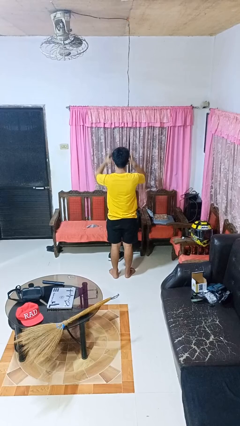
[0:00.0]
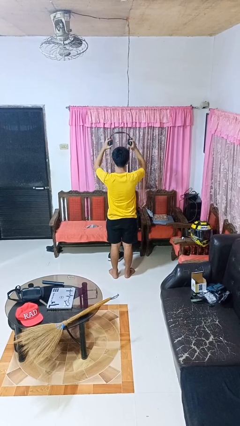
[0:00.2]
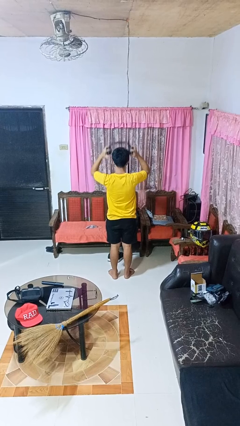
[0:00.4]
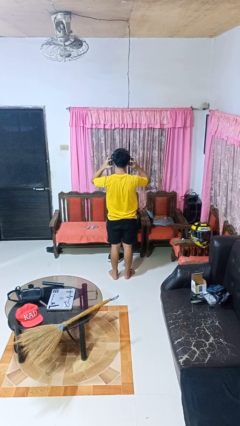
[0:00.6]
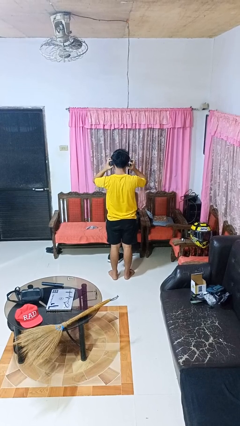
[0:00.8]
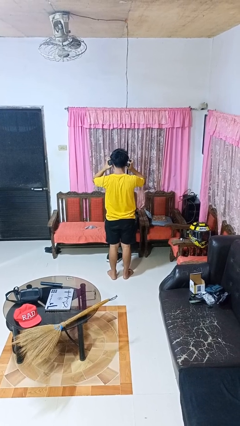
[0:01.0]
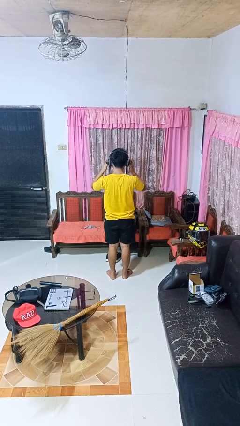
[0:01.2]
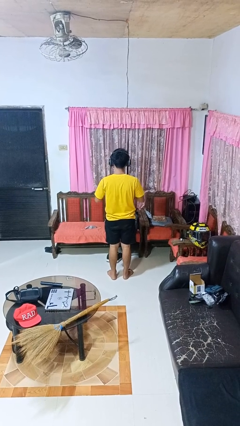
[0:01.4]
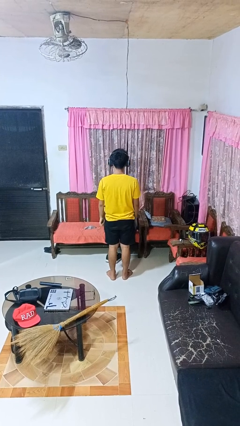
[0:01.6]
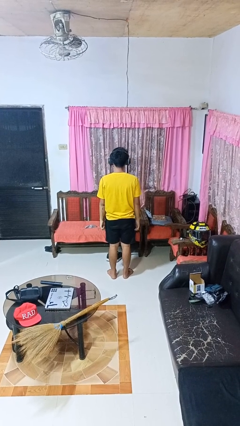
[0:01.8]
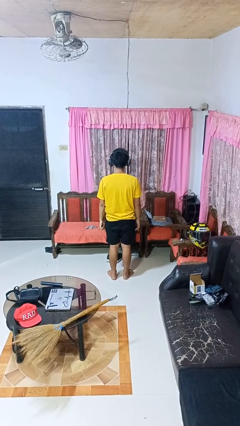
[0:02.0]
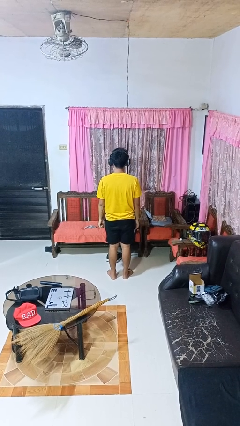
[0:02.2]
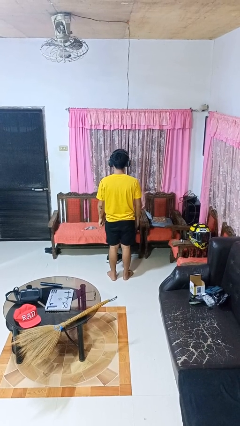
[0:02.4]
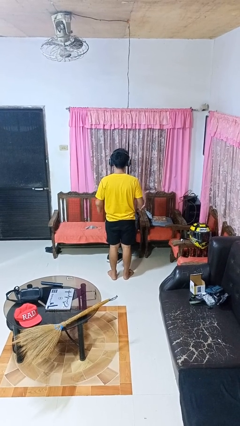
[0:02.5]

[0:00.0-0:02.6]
person puts on headphones

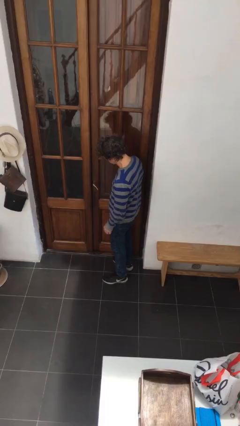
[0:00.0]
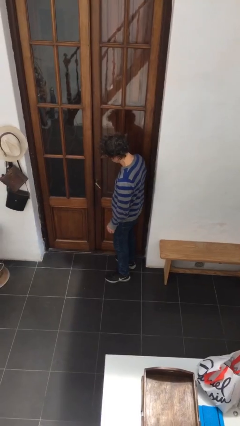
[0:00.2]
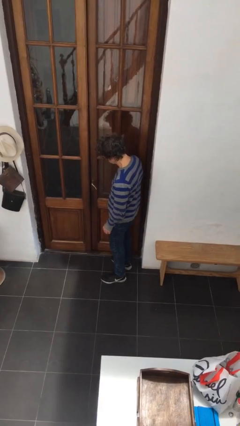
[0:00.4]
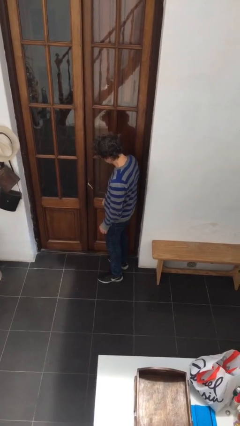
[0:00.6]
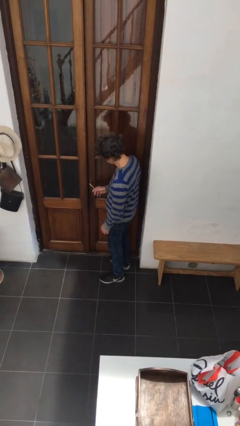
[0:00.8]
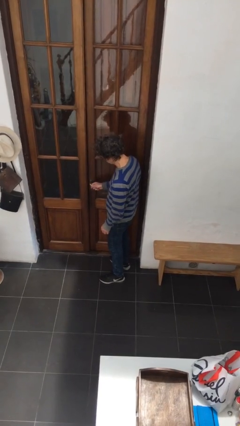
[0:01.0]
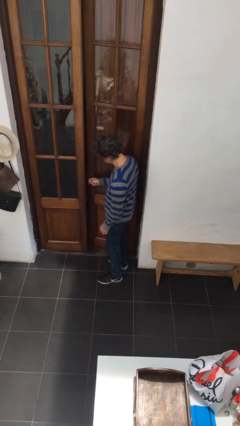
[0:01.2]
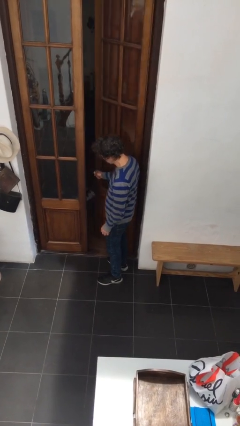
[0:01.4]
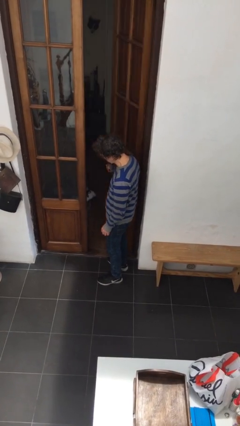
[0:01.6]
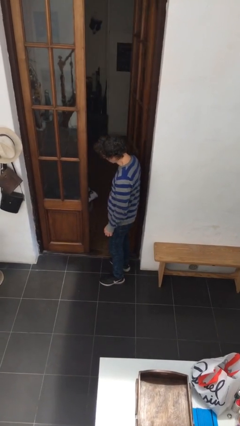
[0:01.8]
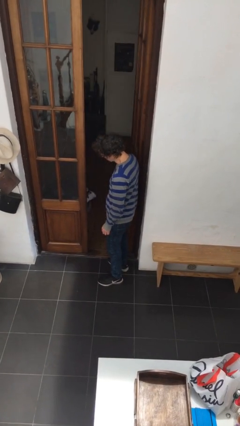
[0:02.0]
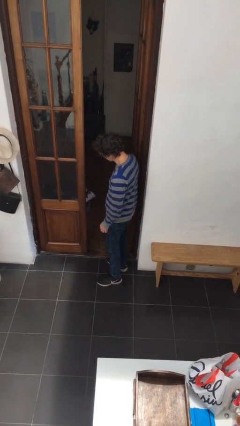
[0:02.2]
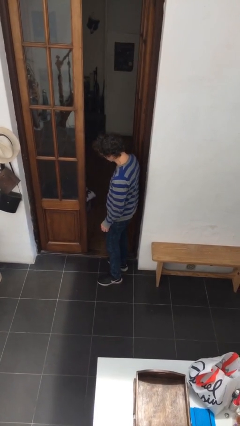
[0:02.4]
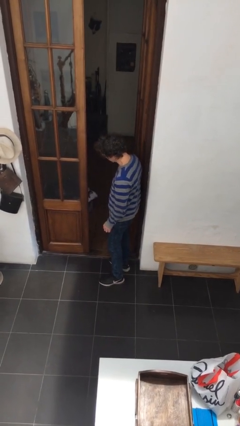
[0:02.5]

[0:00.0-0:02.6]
person opens facility door

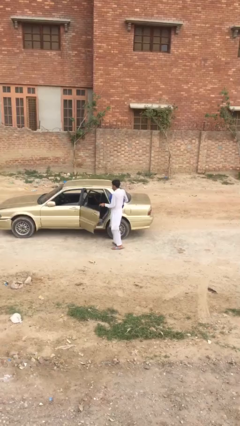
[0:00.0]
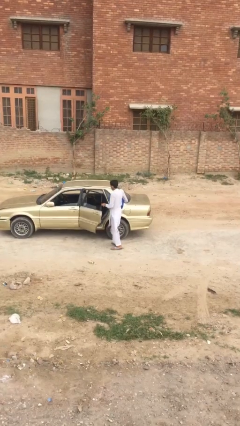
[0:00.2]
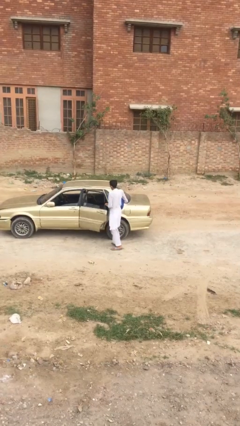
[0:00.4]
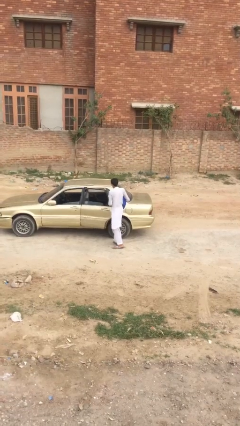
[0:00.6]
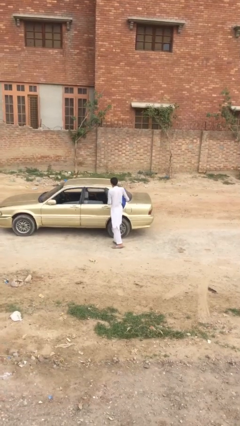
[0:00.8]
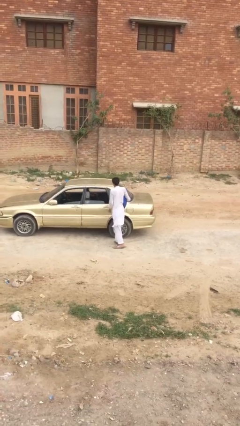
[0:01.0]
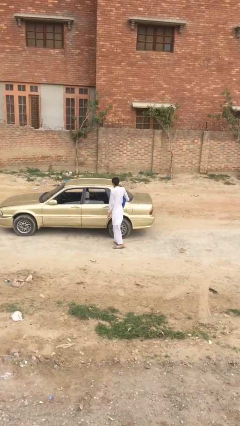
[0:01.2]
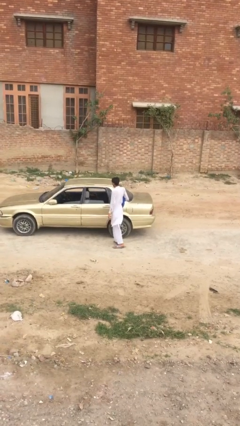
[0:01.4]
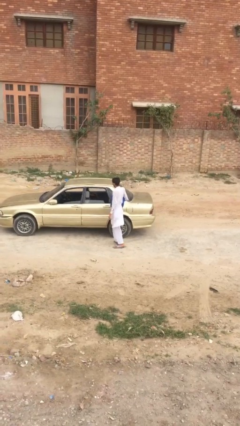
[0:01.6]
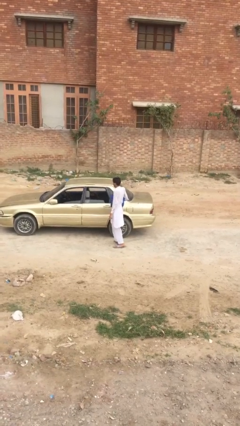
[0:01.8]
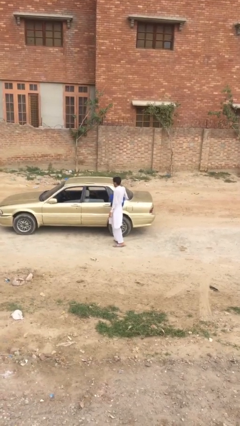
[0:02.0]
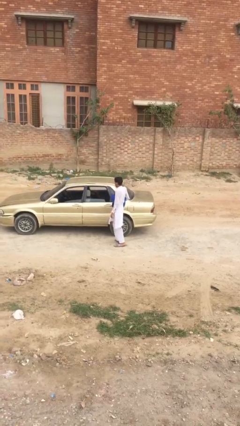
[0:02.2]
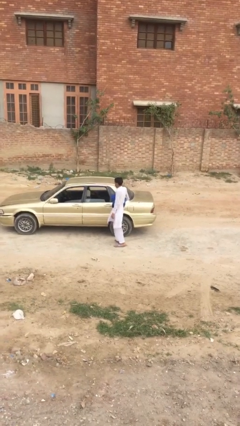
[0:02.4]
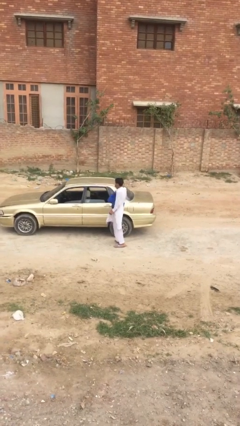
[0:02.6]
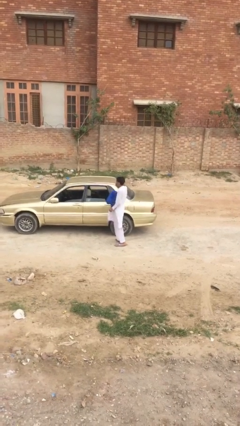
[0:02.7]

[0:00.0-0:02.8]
person closes car door

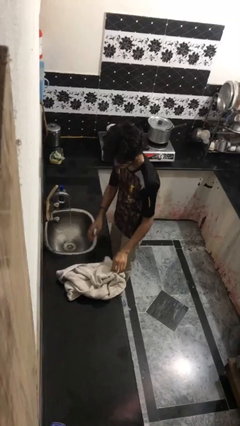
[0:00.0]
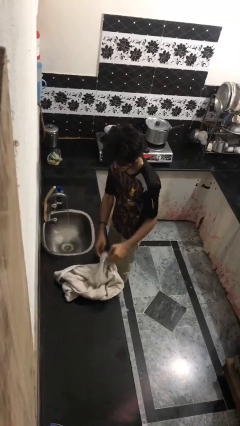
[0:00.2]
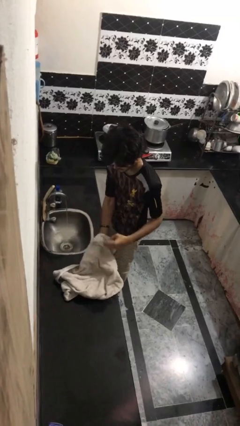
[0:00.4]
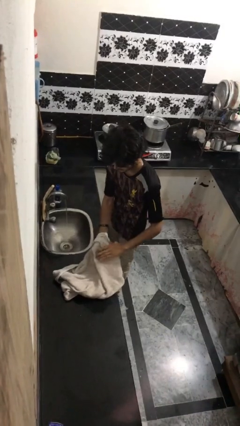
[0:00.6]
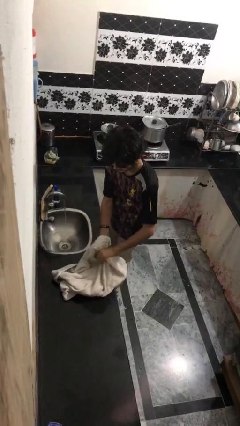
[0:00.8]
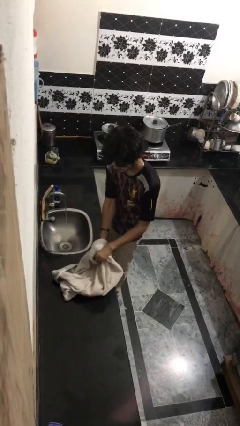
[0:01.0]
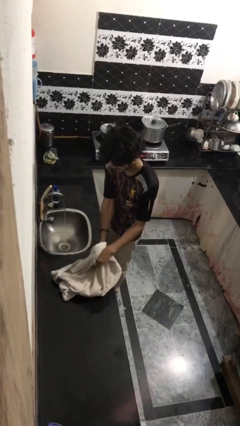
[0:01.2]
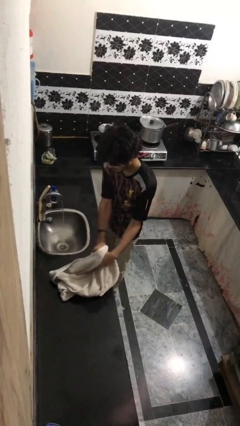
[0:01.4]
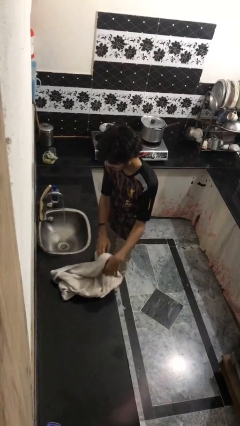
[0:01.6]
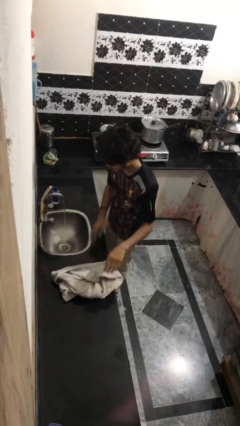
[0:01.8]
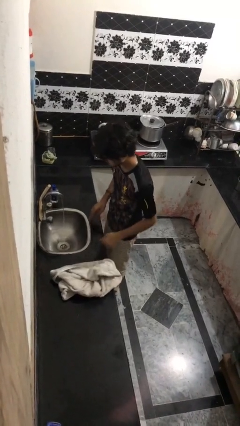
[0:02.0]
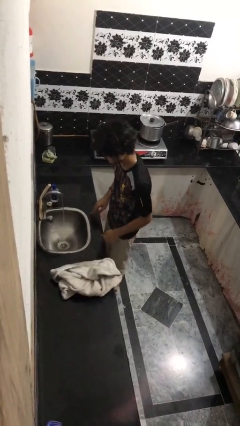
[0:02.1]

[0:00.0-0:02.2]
person dries hands with towel

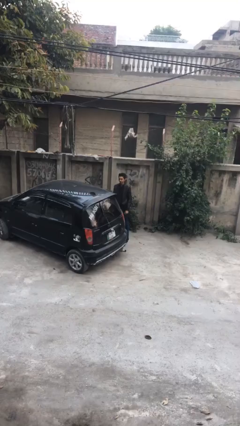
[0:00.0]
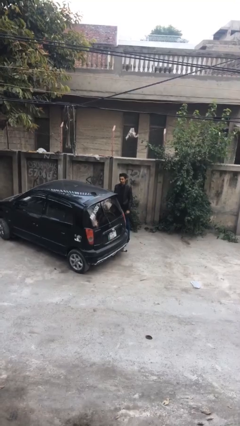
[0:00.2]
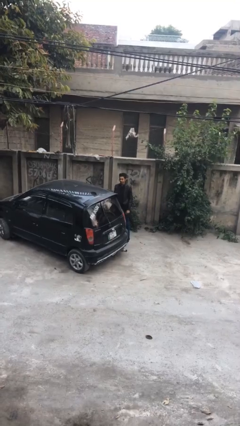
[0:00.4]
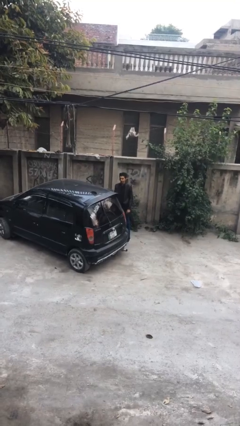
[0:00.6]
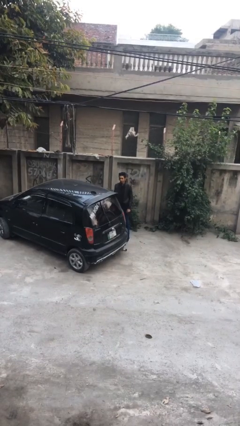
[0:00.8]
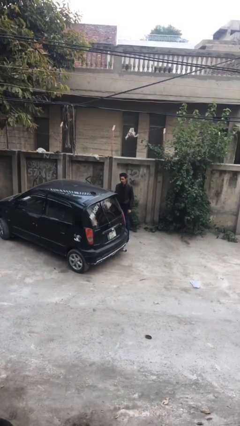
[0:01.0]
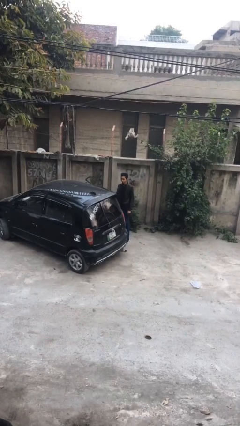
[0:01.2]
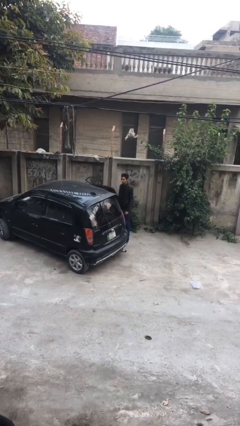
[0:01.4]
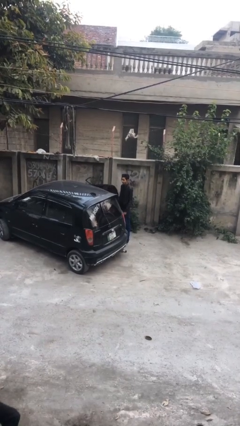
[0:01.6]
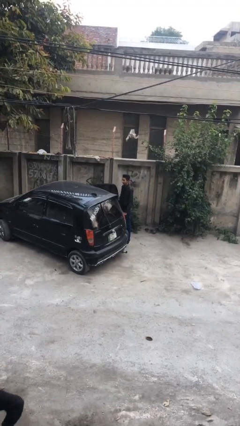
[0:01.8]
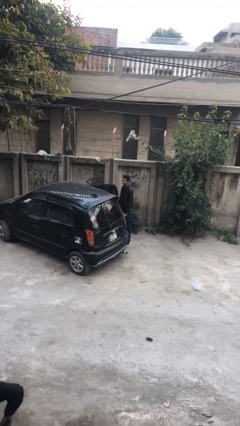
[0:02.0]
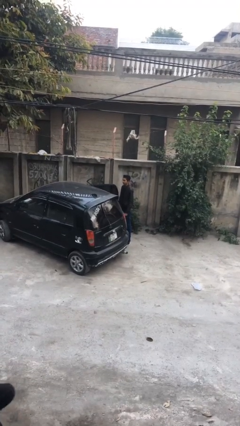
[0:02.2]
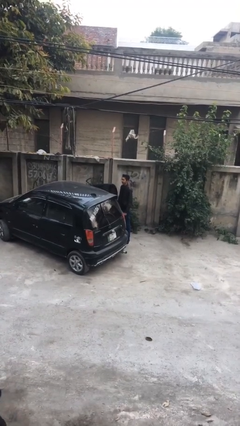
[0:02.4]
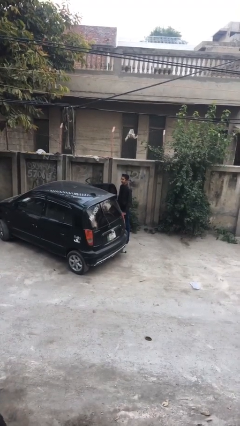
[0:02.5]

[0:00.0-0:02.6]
person opens car door

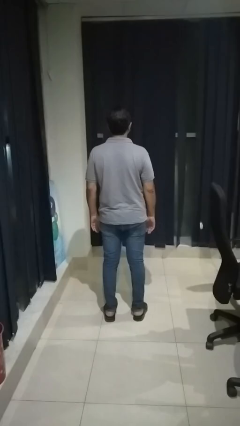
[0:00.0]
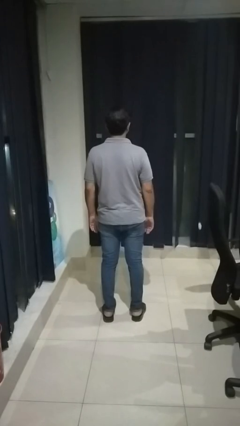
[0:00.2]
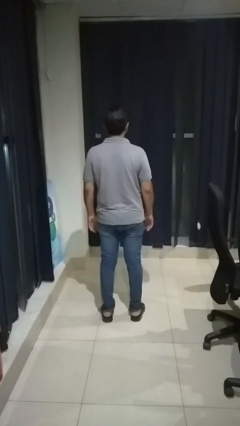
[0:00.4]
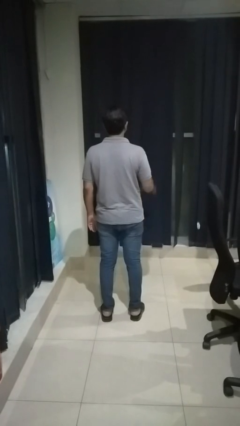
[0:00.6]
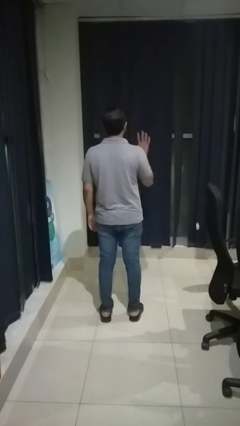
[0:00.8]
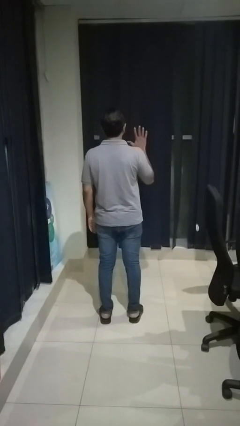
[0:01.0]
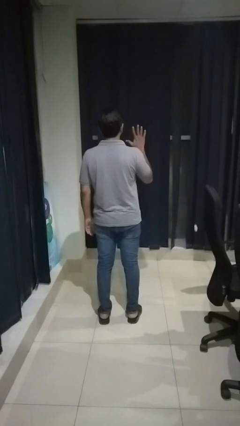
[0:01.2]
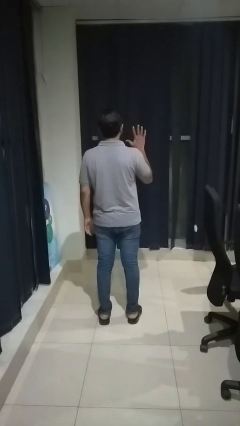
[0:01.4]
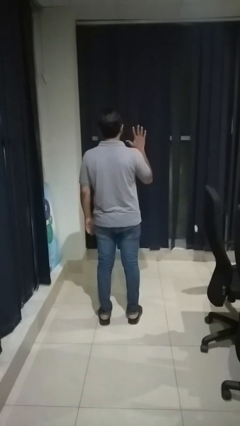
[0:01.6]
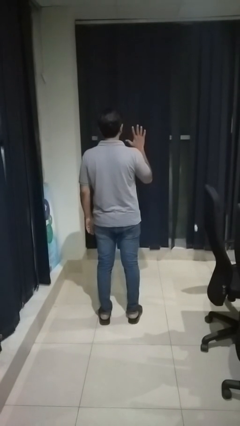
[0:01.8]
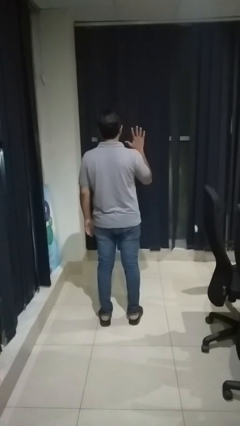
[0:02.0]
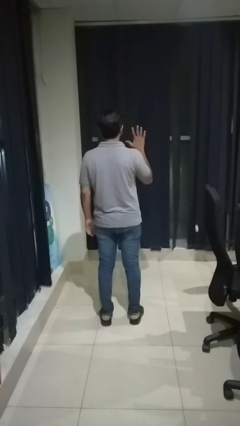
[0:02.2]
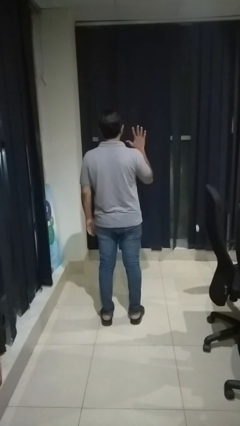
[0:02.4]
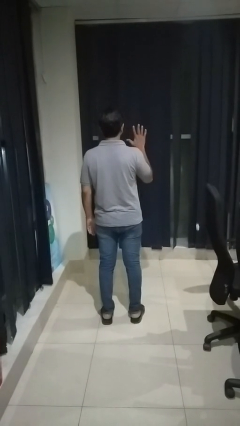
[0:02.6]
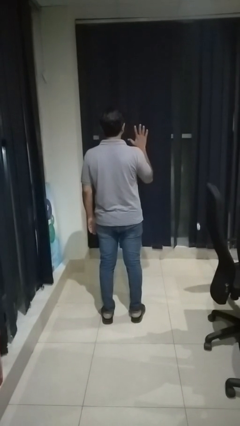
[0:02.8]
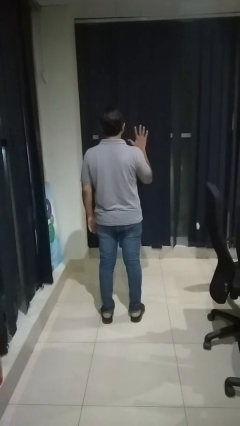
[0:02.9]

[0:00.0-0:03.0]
person gestures number five

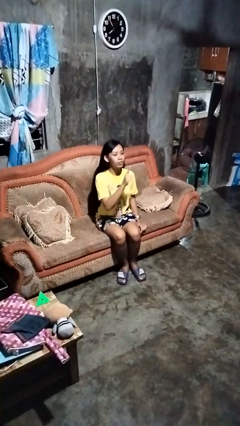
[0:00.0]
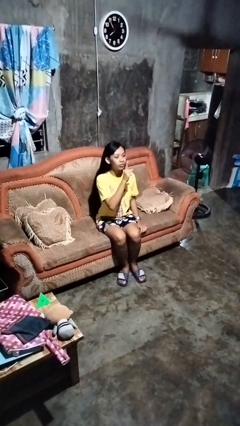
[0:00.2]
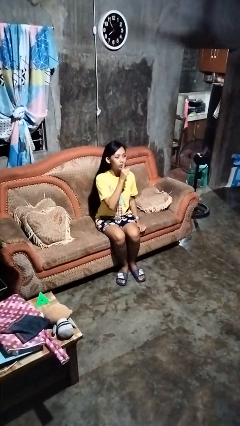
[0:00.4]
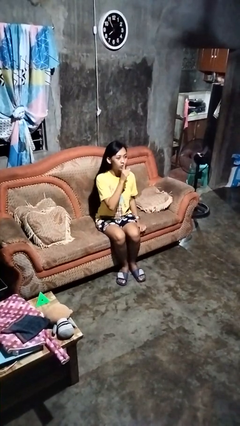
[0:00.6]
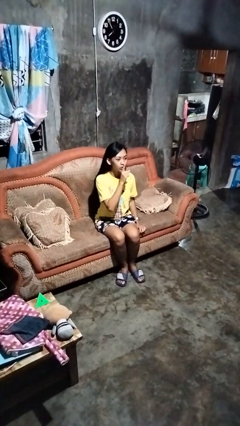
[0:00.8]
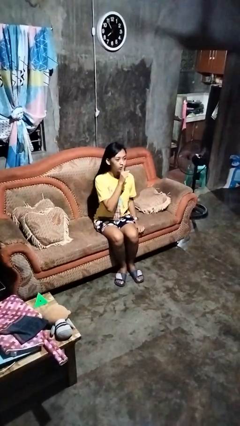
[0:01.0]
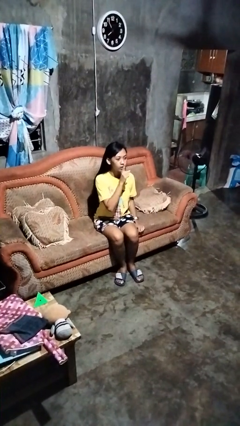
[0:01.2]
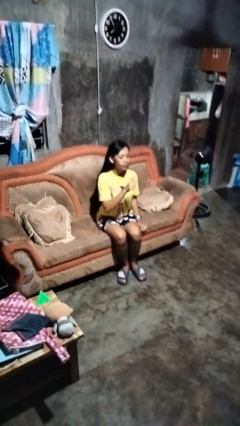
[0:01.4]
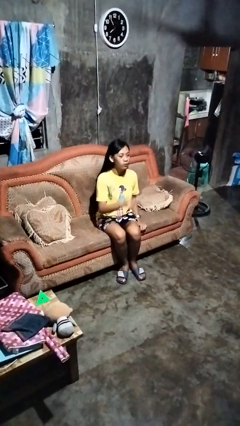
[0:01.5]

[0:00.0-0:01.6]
person gestures be quiet
